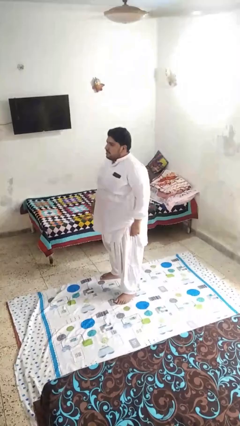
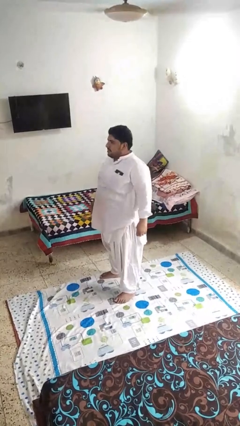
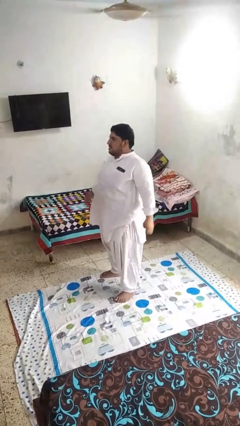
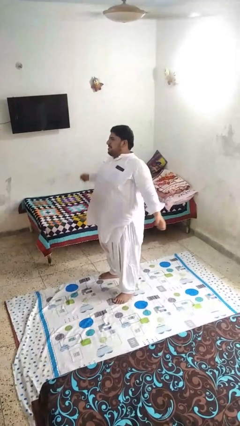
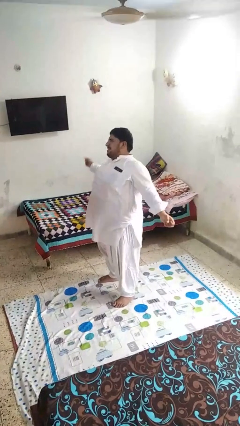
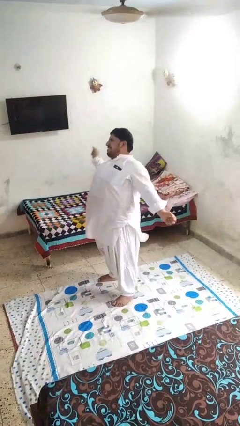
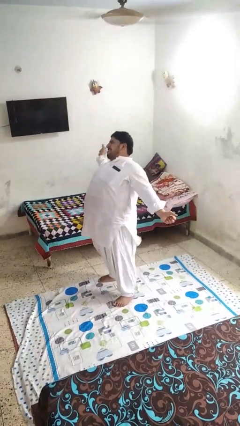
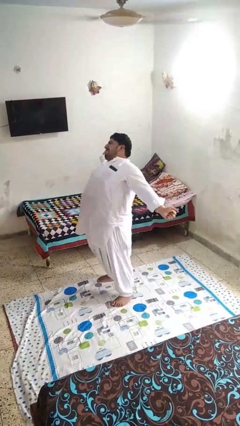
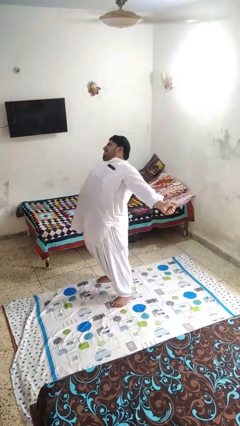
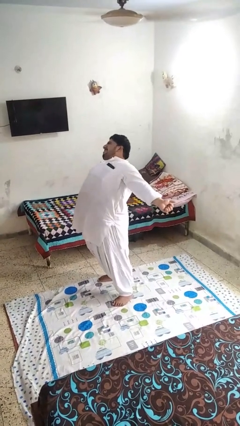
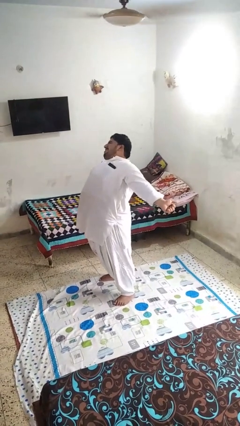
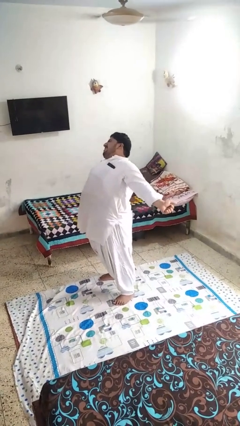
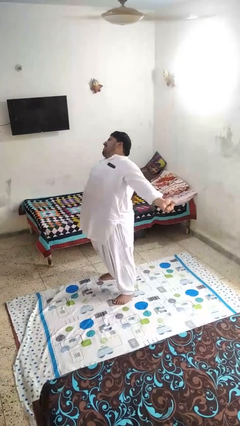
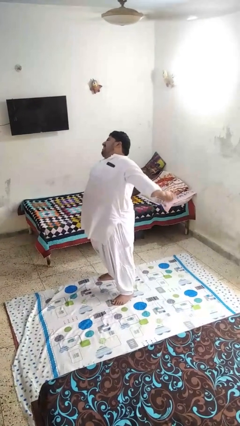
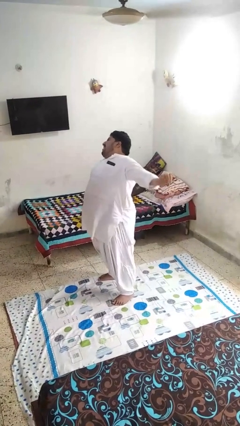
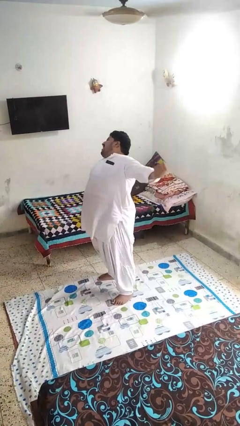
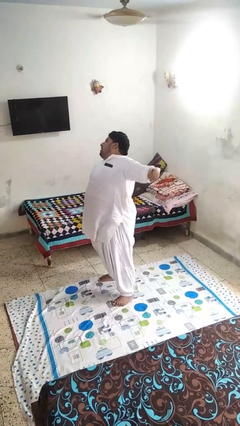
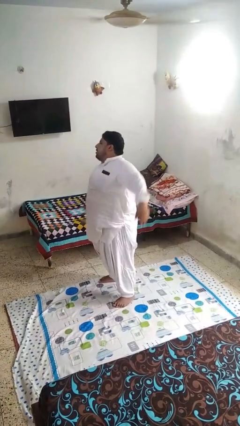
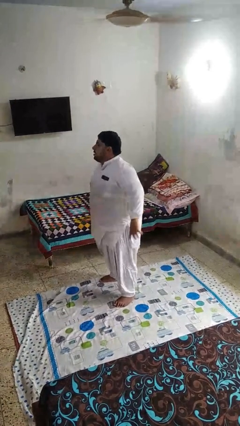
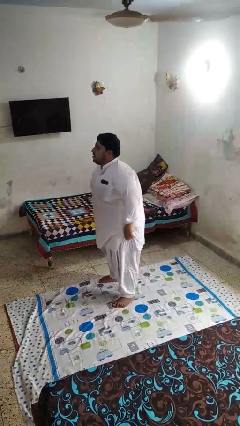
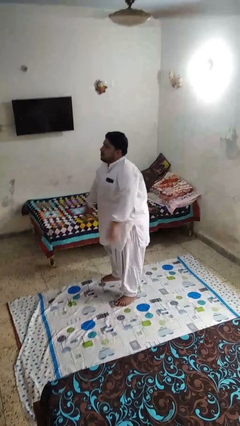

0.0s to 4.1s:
person stretches arms to side

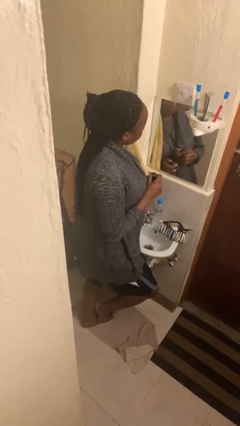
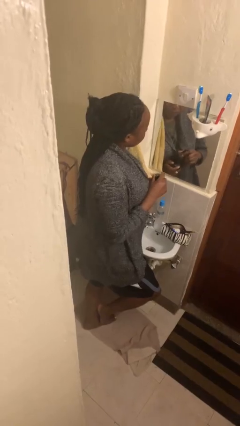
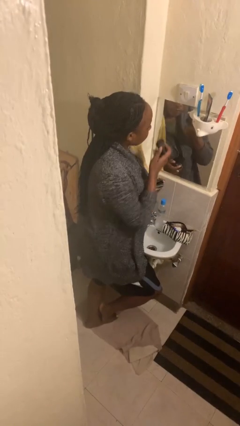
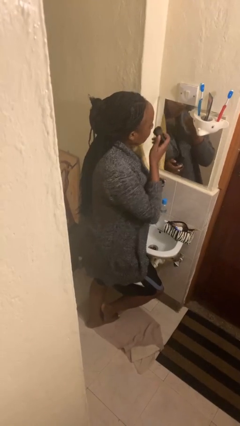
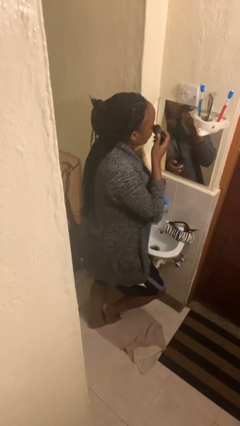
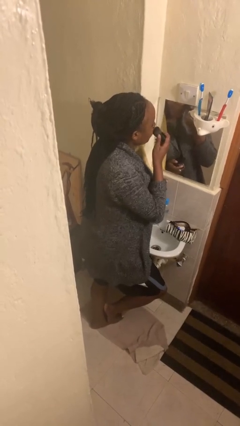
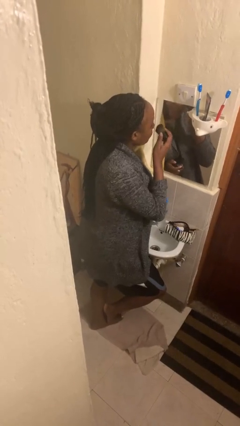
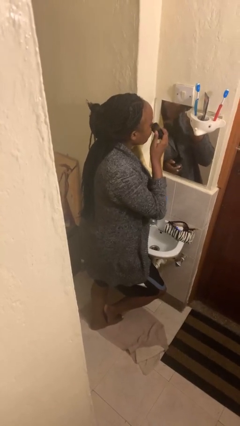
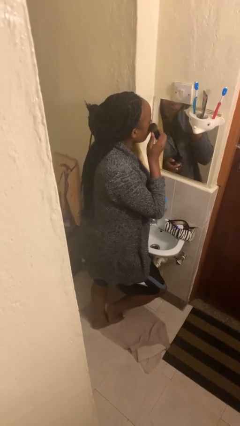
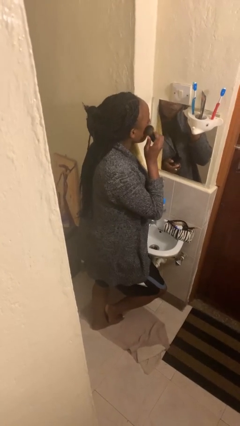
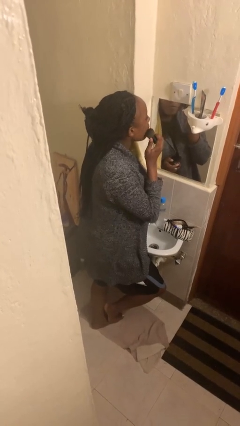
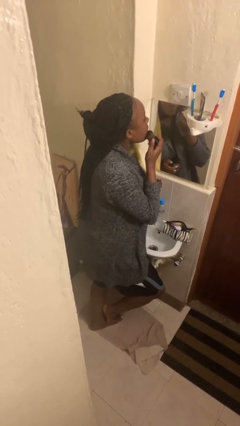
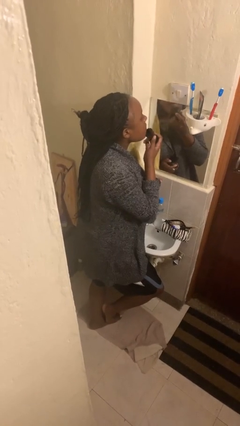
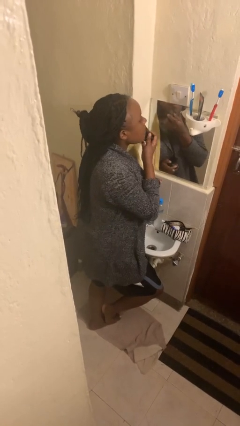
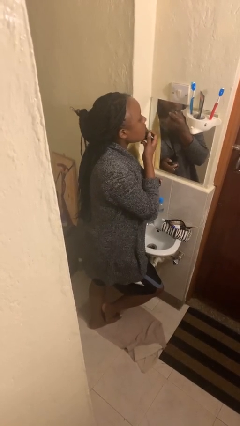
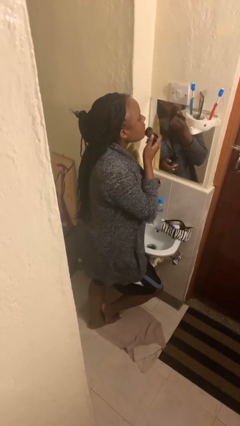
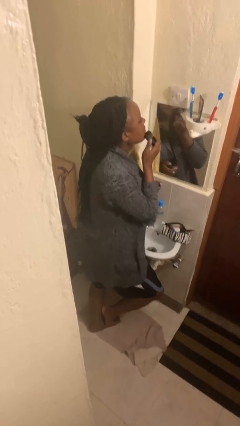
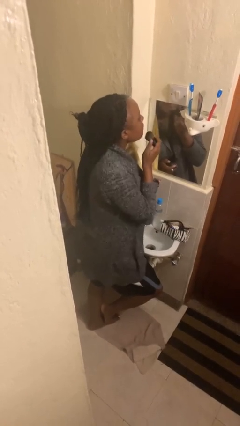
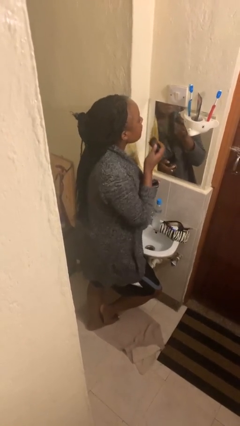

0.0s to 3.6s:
person applies foundation makeup

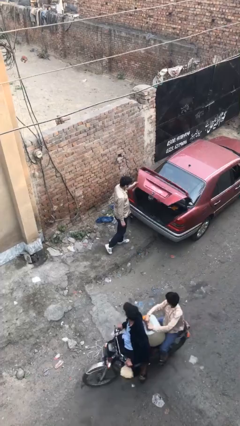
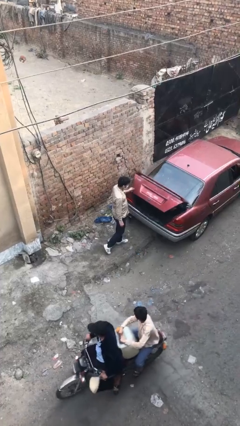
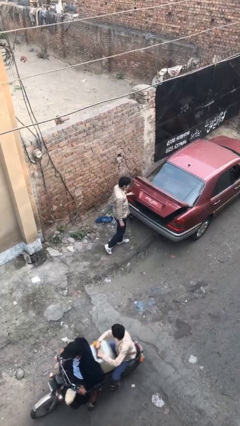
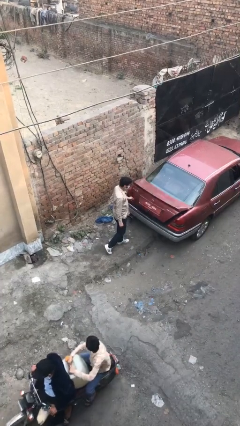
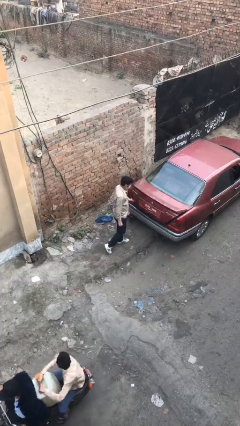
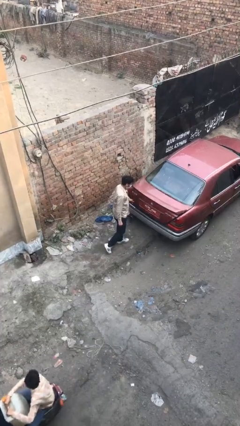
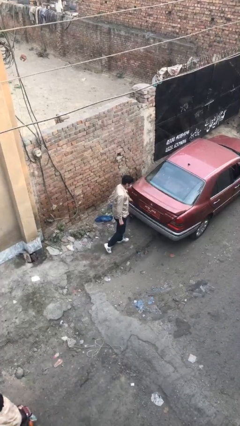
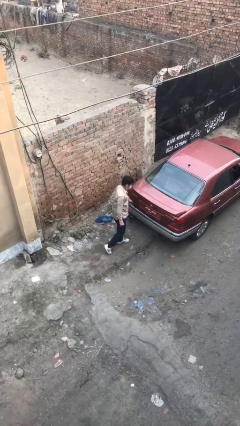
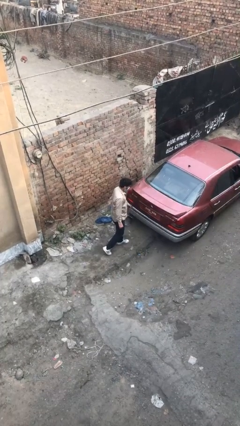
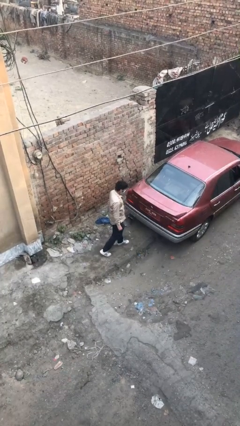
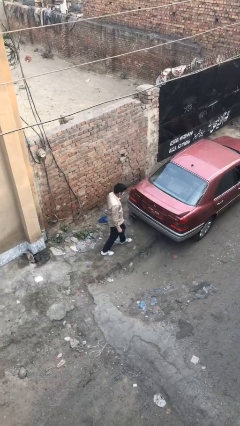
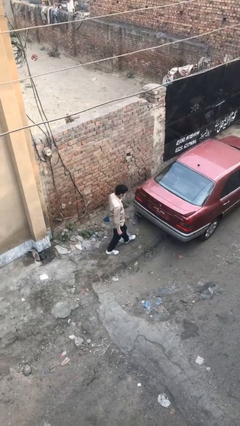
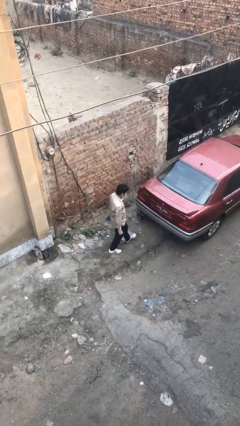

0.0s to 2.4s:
person closes car trunk

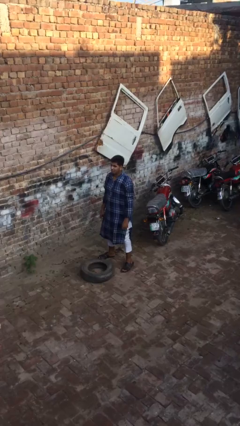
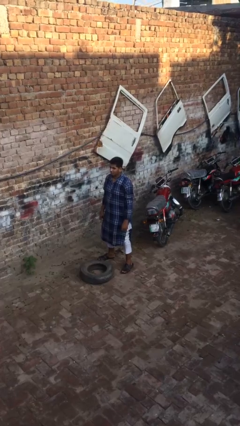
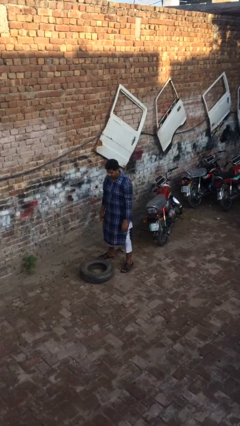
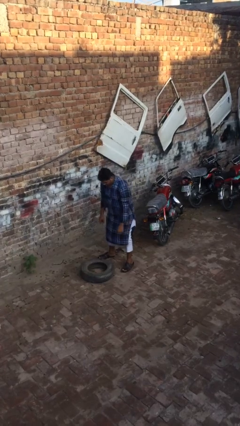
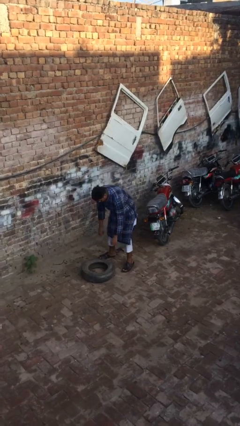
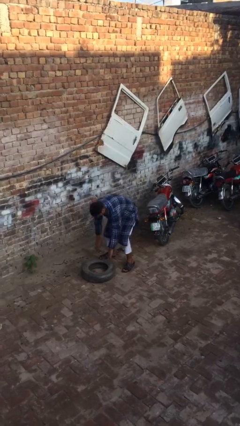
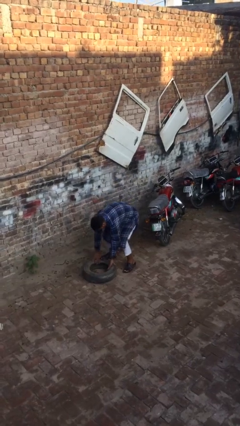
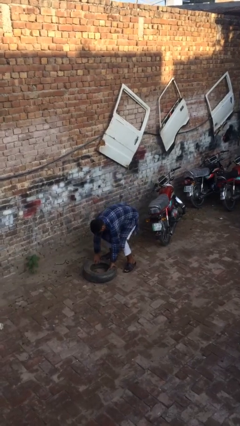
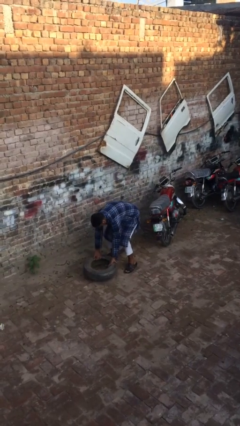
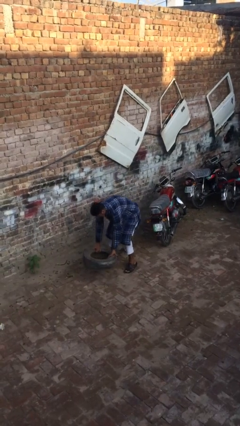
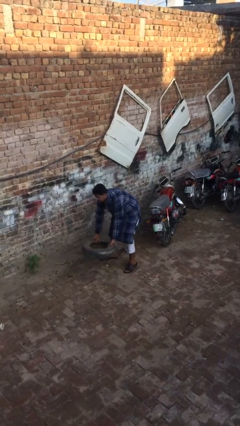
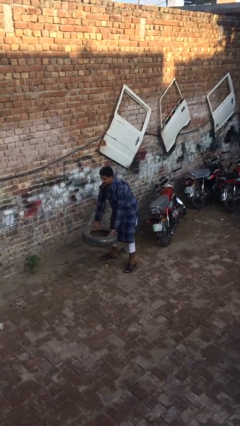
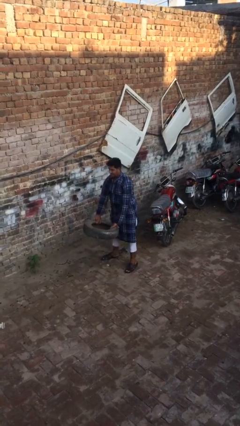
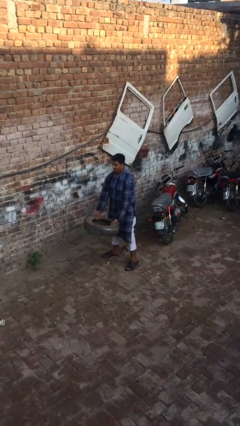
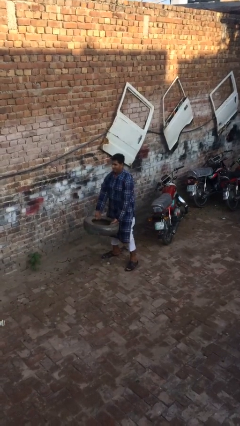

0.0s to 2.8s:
person picks up object from floor

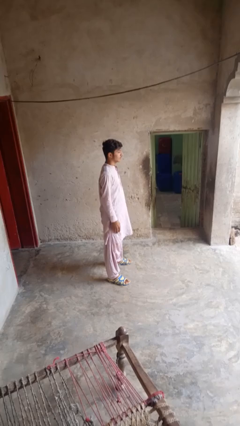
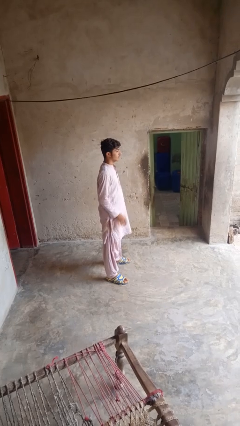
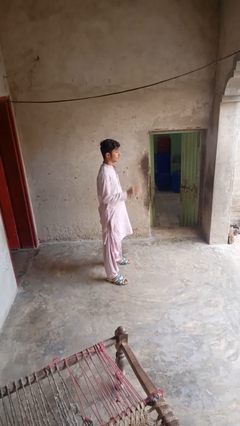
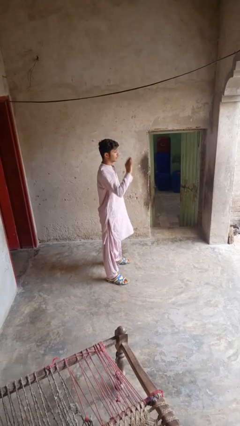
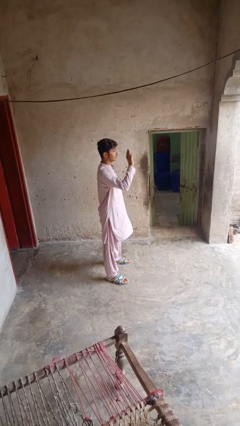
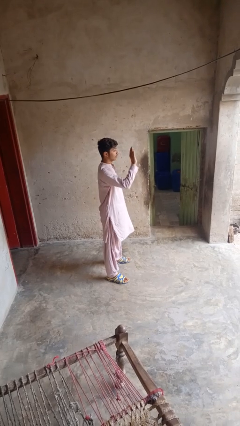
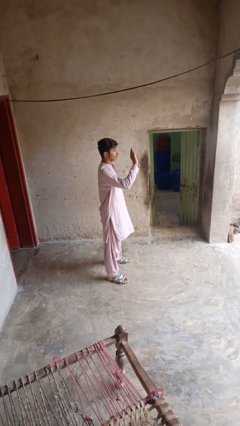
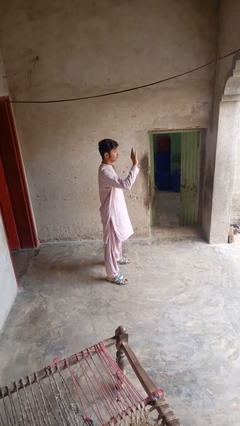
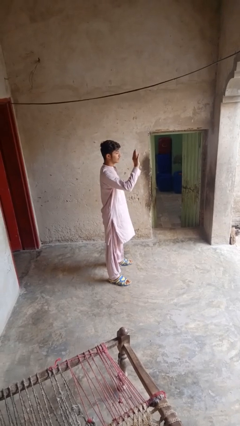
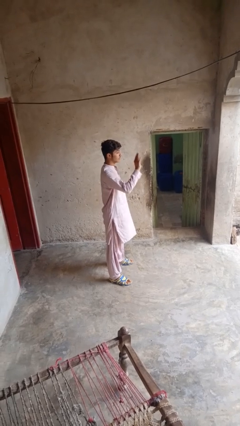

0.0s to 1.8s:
person waves at person

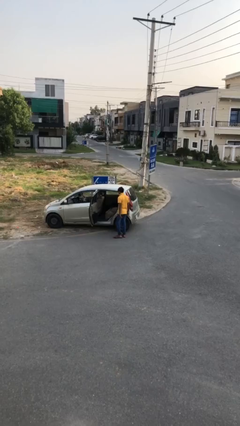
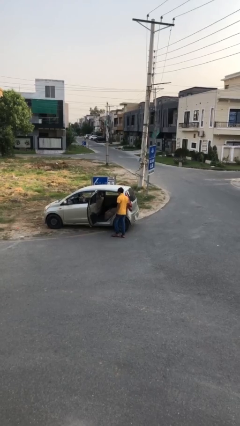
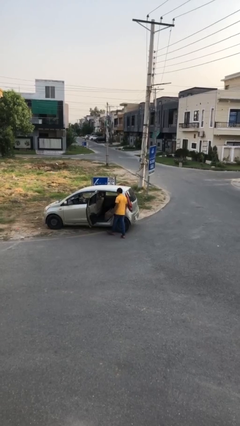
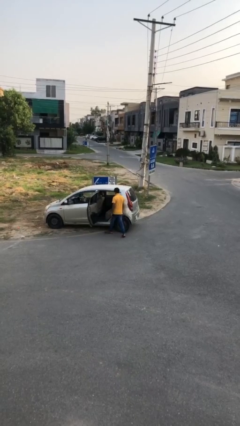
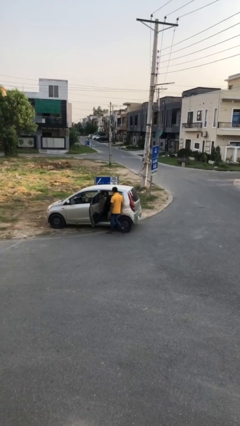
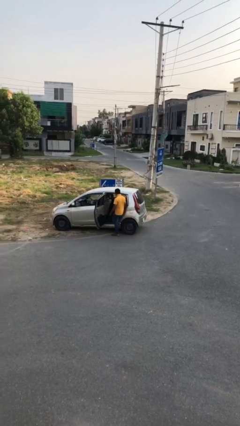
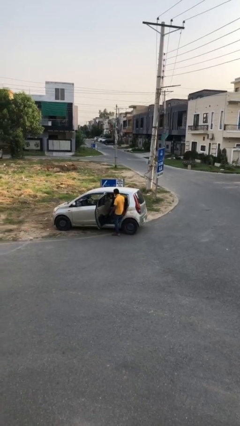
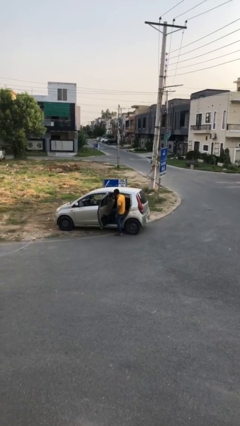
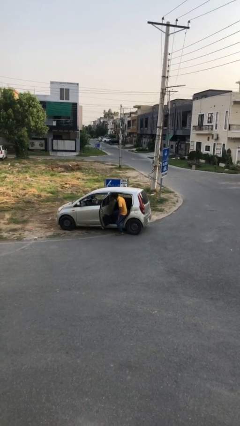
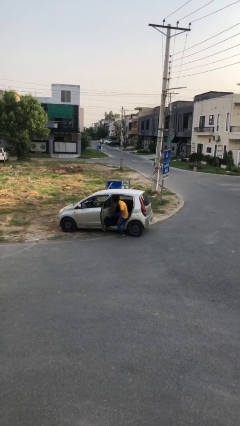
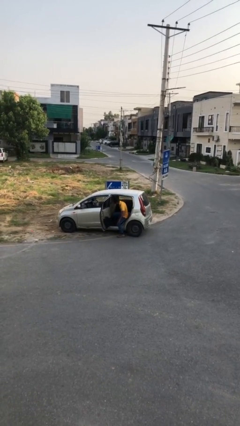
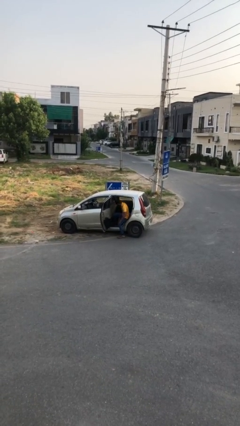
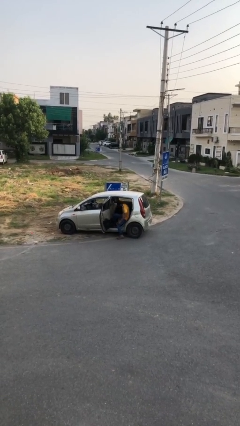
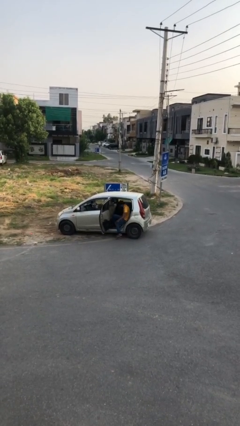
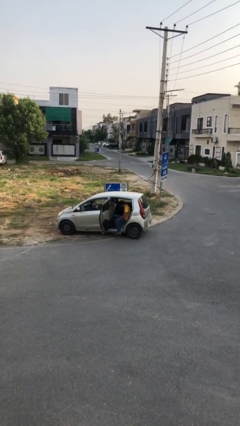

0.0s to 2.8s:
person enters car
